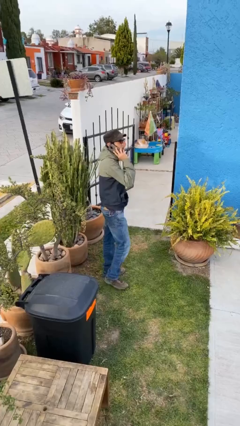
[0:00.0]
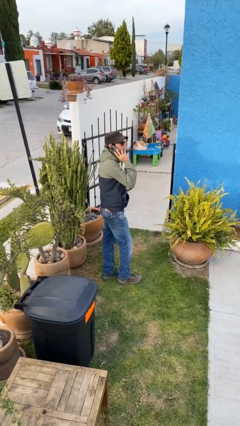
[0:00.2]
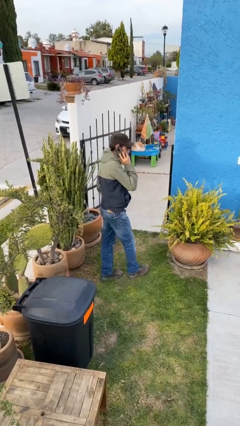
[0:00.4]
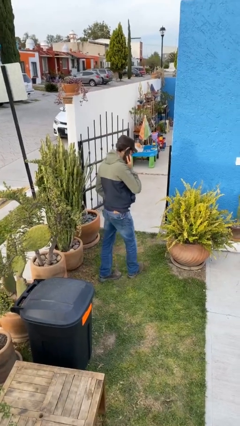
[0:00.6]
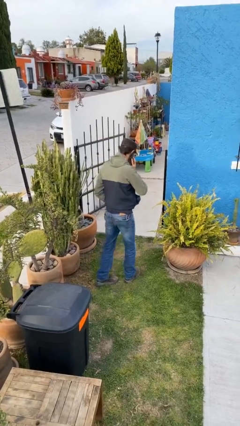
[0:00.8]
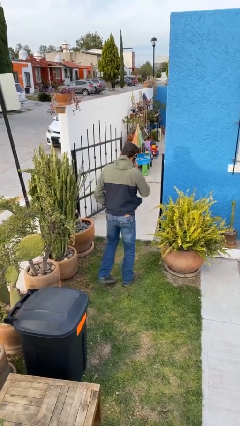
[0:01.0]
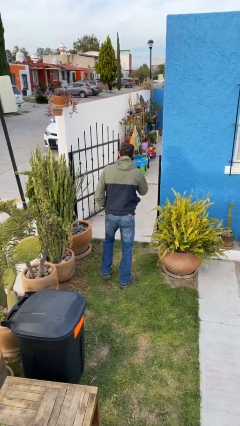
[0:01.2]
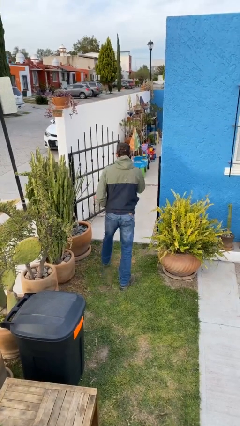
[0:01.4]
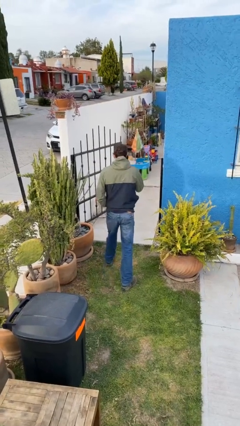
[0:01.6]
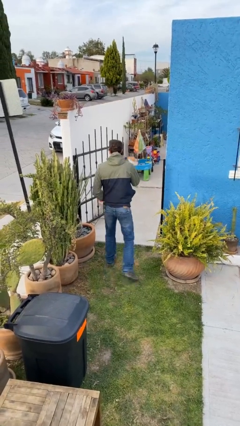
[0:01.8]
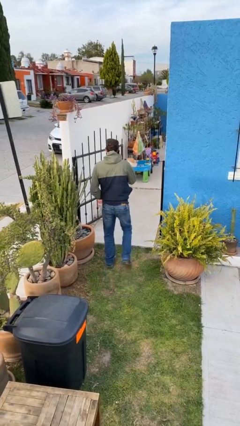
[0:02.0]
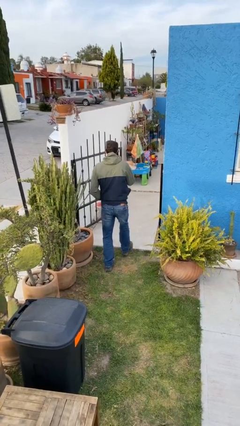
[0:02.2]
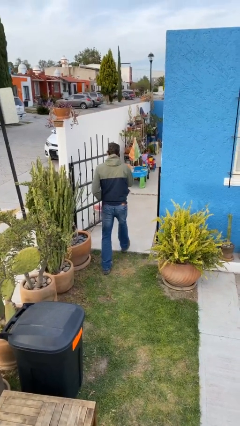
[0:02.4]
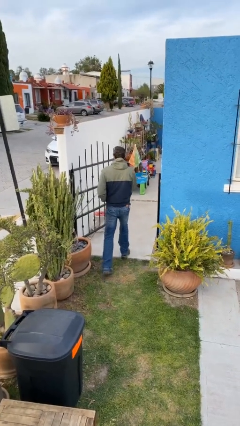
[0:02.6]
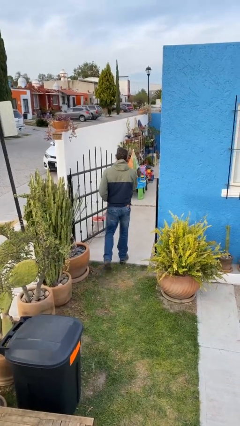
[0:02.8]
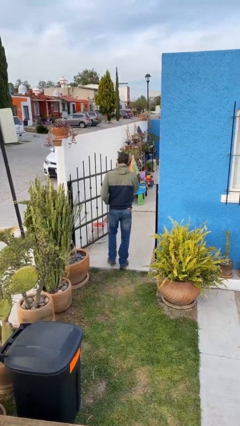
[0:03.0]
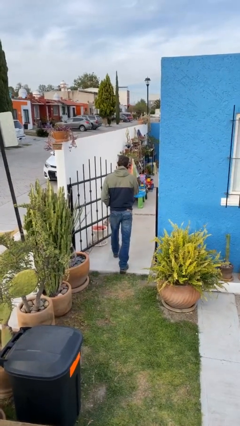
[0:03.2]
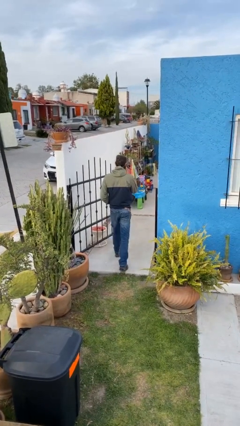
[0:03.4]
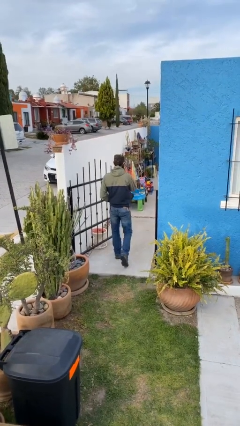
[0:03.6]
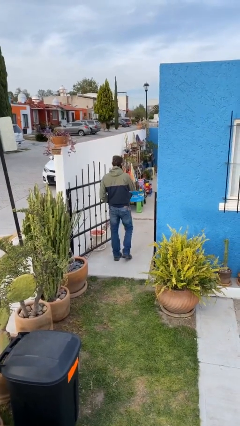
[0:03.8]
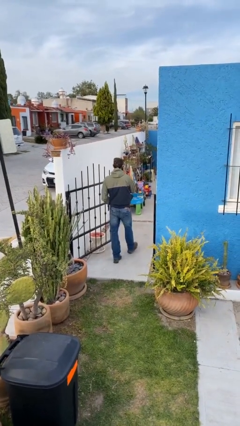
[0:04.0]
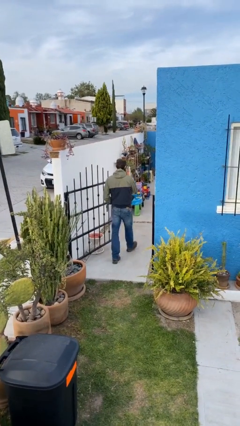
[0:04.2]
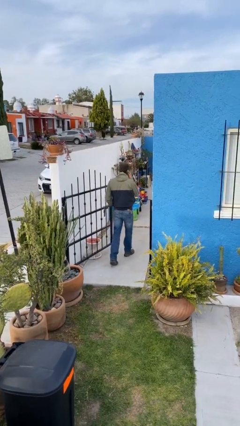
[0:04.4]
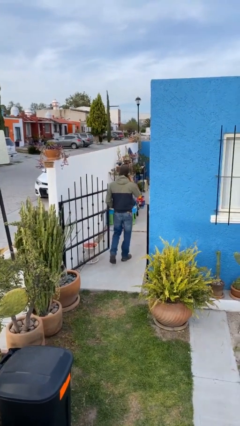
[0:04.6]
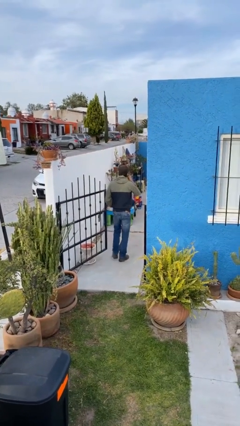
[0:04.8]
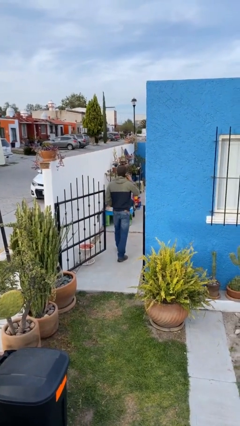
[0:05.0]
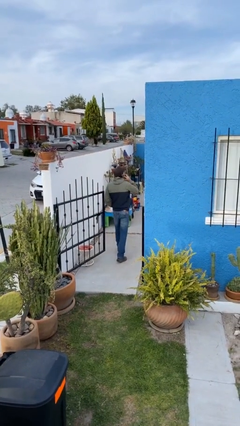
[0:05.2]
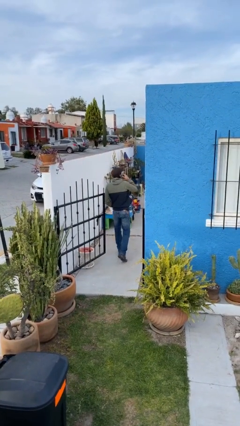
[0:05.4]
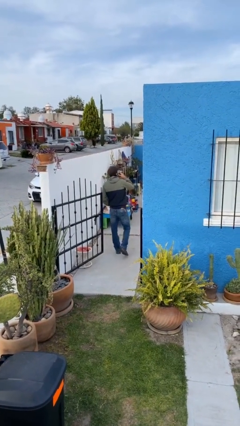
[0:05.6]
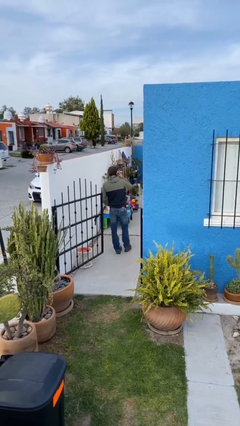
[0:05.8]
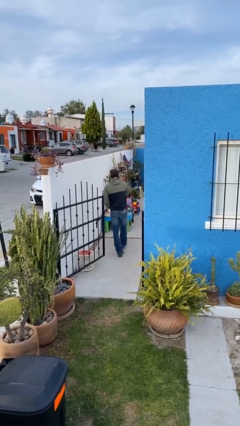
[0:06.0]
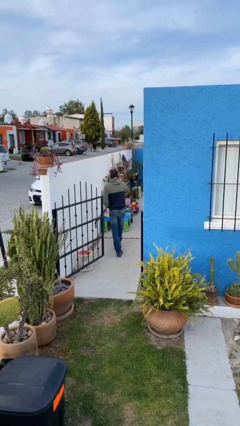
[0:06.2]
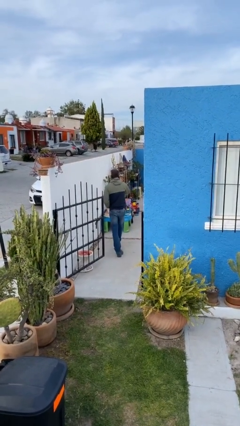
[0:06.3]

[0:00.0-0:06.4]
person exits scene through structure

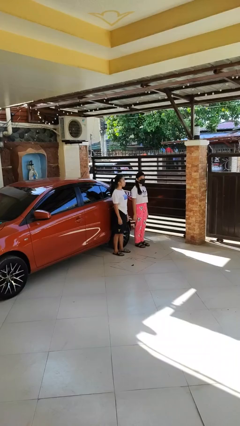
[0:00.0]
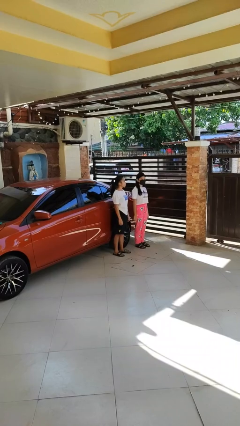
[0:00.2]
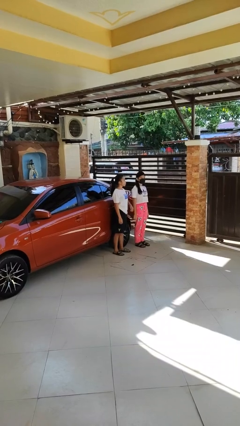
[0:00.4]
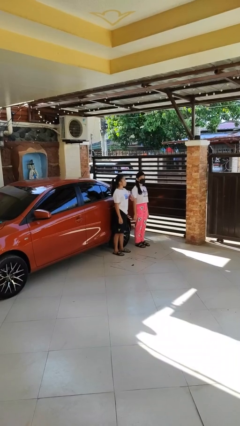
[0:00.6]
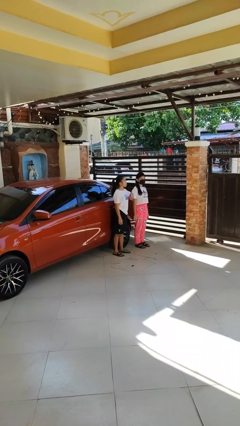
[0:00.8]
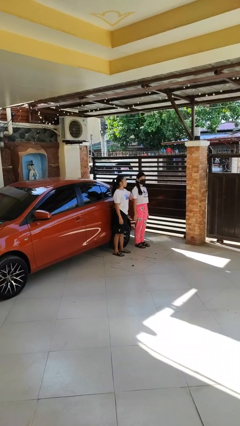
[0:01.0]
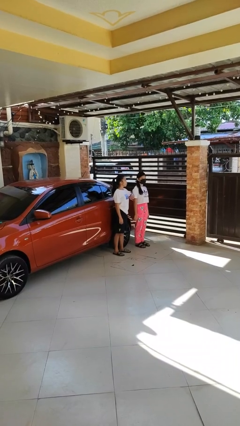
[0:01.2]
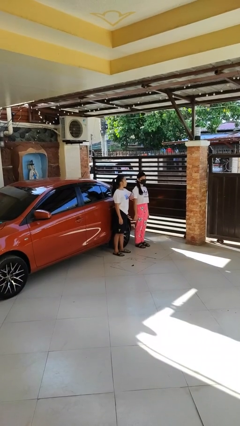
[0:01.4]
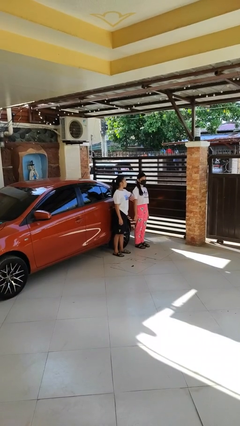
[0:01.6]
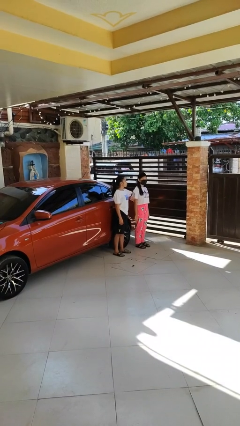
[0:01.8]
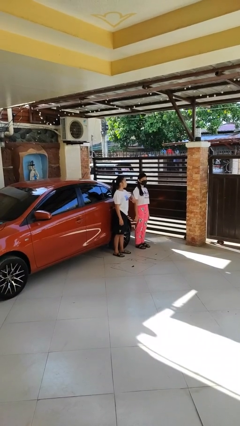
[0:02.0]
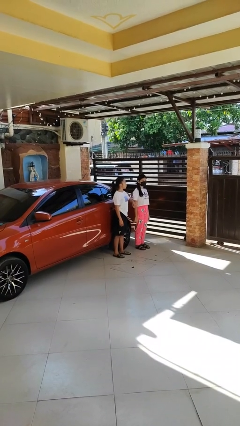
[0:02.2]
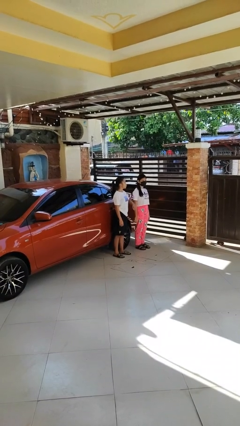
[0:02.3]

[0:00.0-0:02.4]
person nudges person with elbow

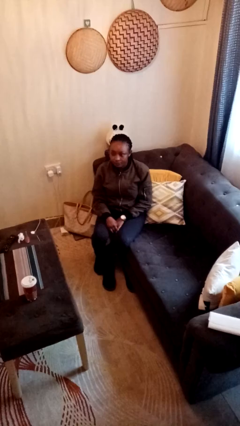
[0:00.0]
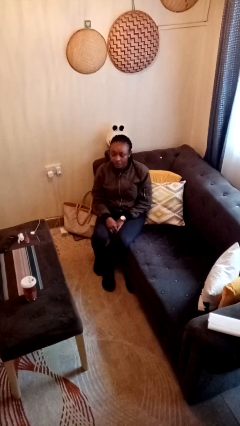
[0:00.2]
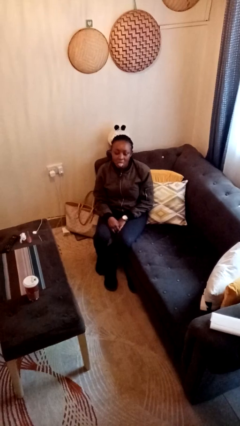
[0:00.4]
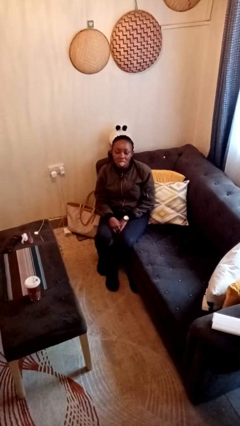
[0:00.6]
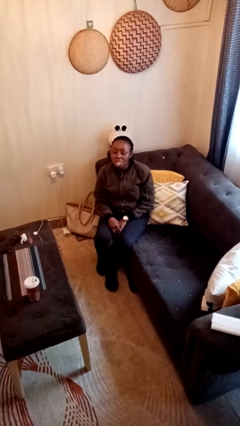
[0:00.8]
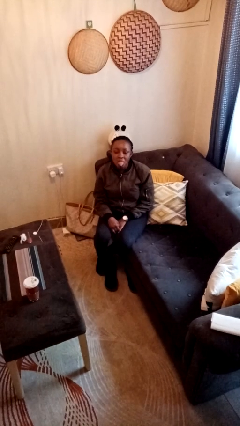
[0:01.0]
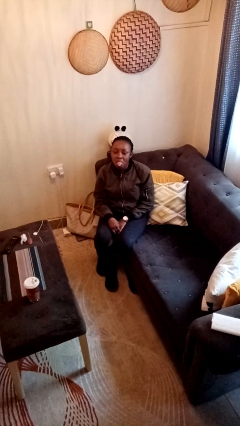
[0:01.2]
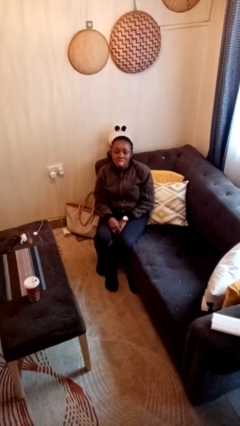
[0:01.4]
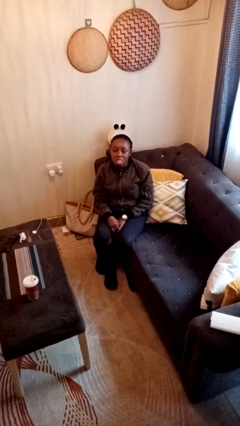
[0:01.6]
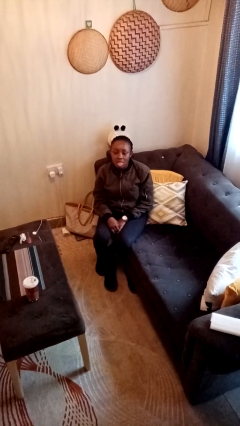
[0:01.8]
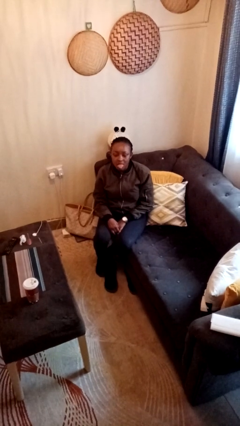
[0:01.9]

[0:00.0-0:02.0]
person sticks out tongue

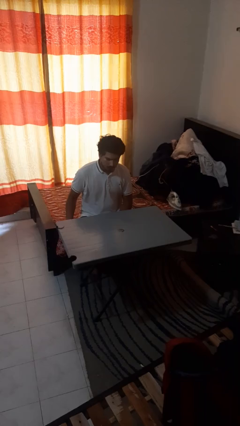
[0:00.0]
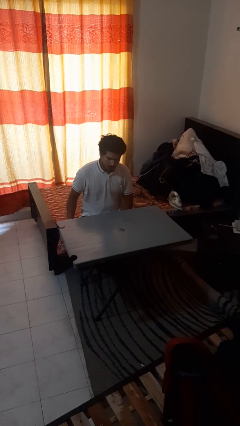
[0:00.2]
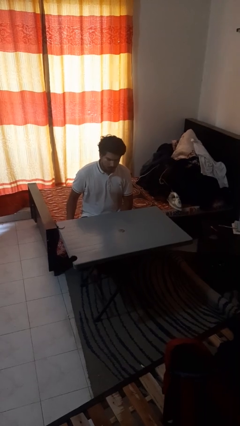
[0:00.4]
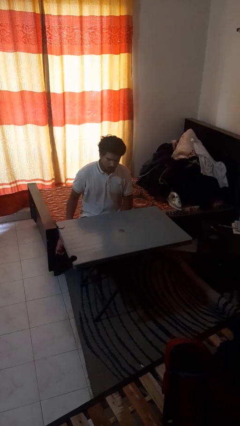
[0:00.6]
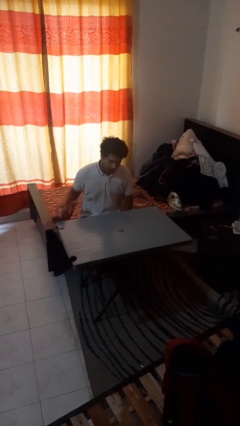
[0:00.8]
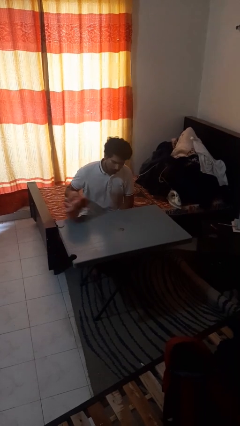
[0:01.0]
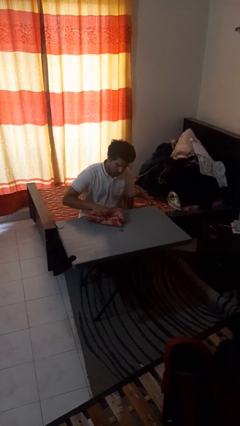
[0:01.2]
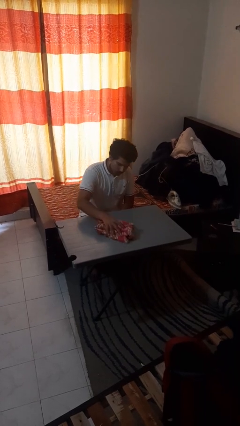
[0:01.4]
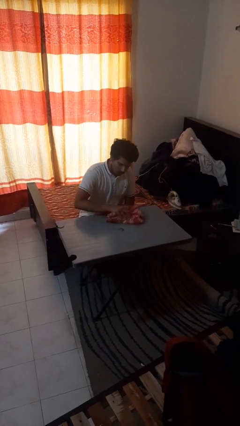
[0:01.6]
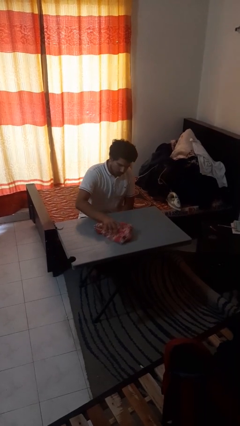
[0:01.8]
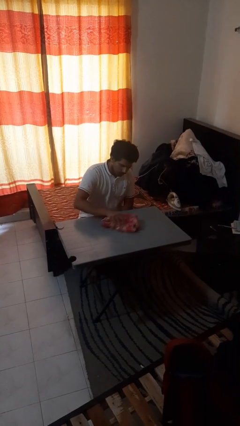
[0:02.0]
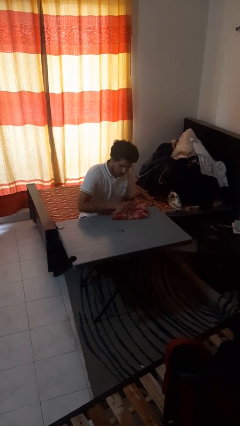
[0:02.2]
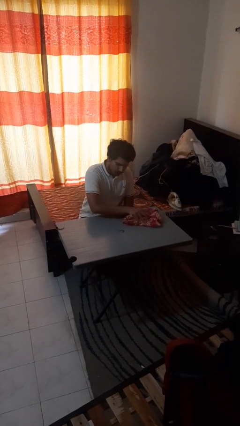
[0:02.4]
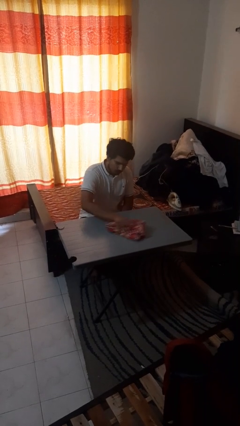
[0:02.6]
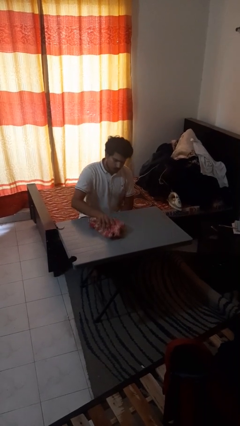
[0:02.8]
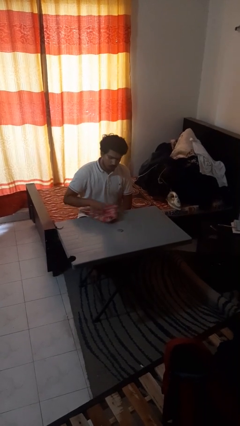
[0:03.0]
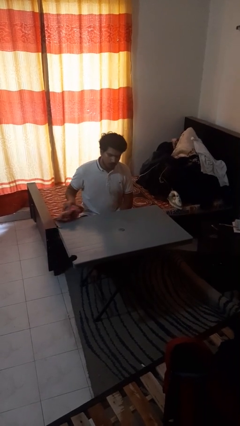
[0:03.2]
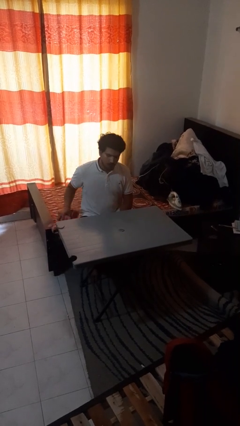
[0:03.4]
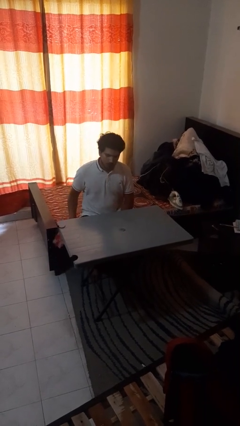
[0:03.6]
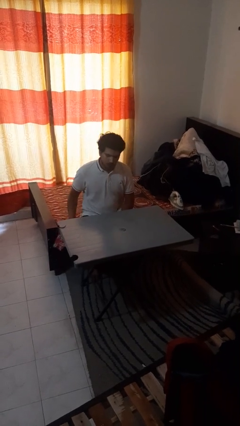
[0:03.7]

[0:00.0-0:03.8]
person cleans table with rag

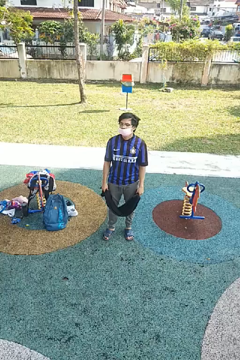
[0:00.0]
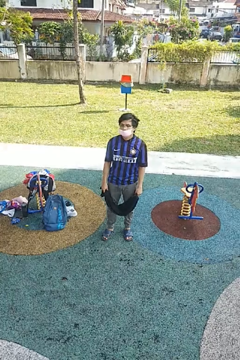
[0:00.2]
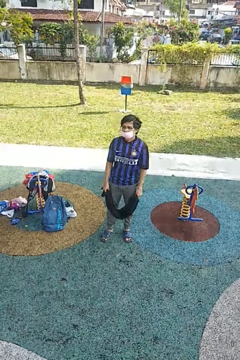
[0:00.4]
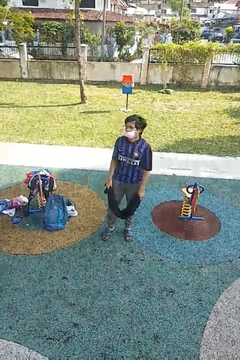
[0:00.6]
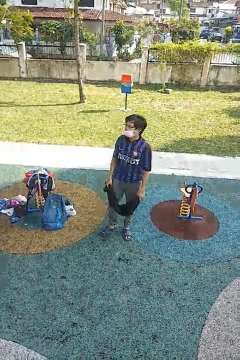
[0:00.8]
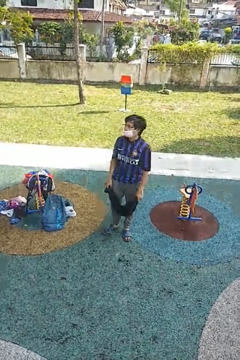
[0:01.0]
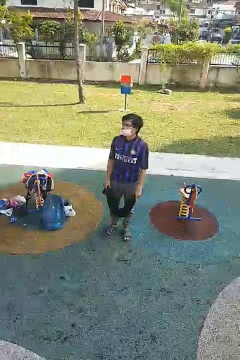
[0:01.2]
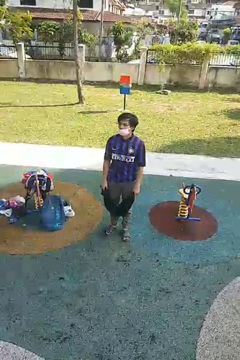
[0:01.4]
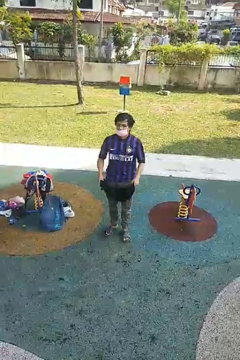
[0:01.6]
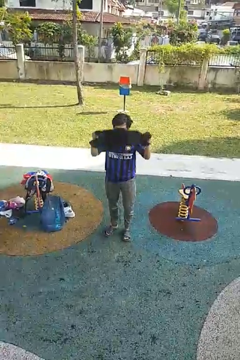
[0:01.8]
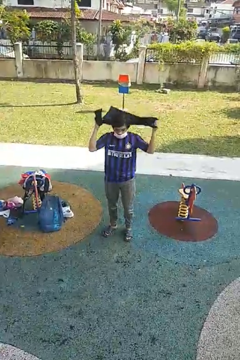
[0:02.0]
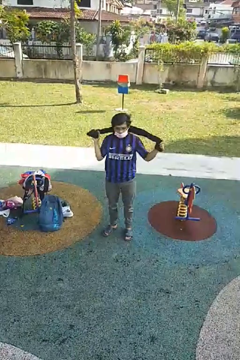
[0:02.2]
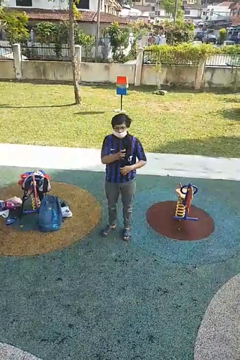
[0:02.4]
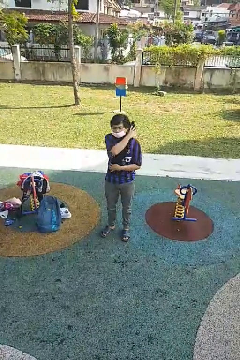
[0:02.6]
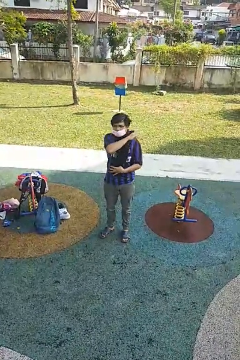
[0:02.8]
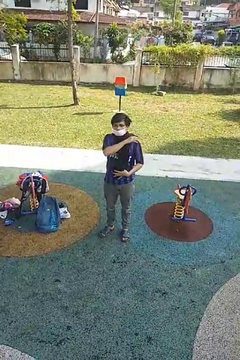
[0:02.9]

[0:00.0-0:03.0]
person puts on scarf
